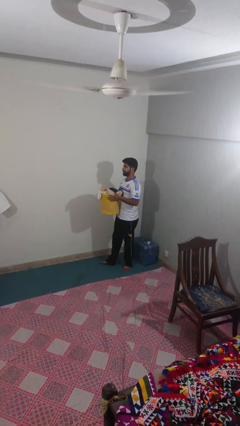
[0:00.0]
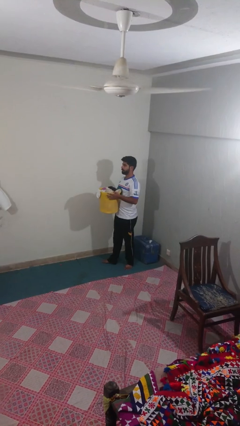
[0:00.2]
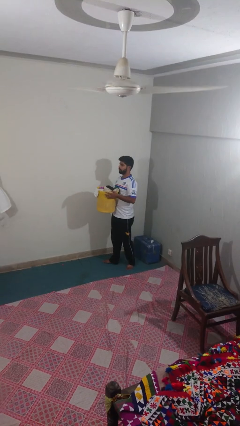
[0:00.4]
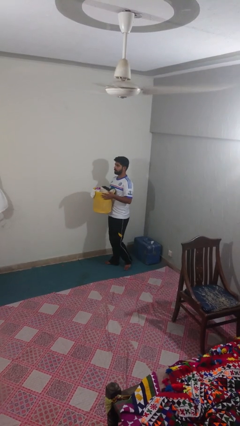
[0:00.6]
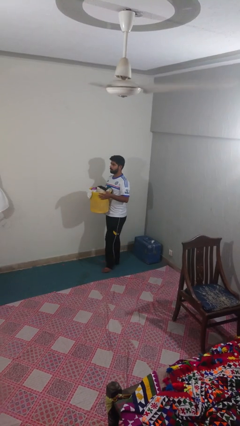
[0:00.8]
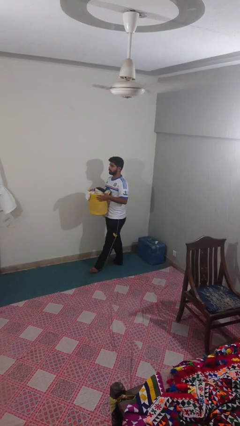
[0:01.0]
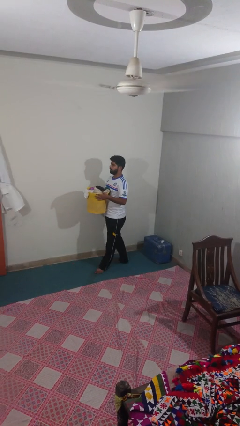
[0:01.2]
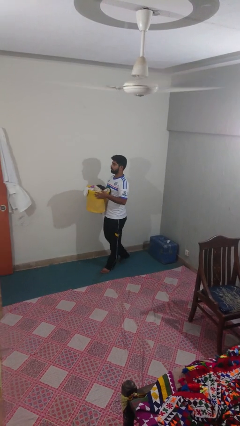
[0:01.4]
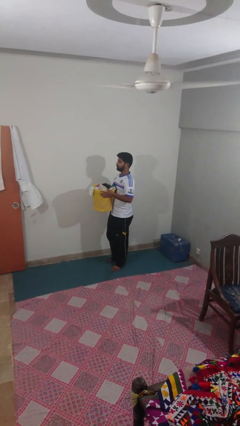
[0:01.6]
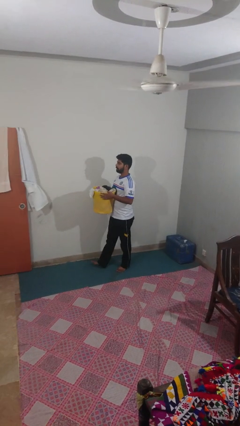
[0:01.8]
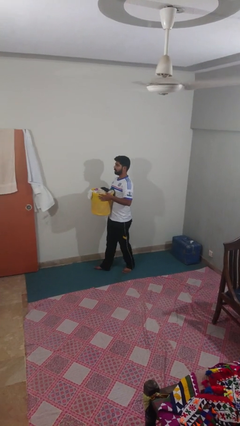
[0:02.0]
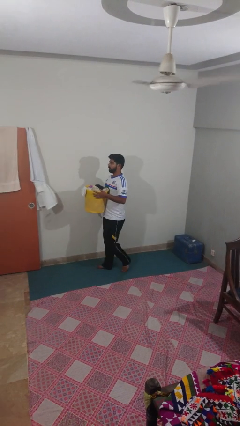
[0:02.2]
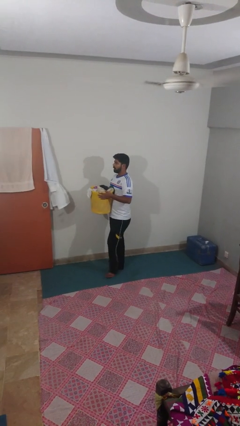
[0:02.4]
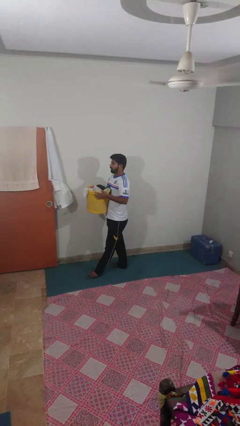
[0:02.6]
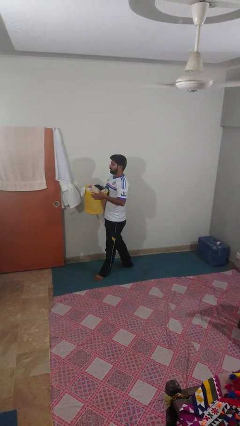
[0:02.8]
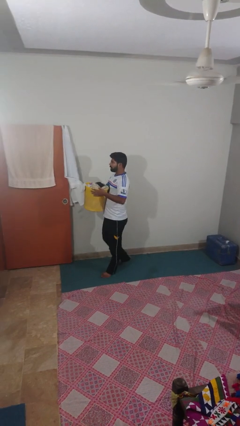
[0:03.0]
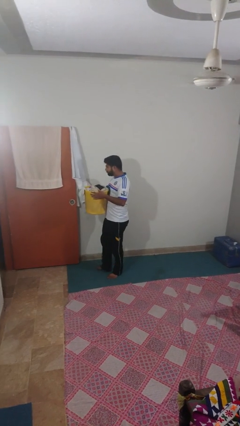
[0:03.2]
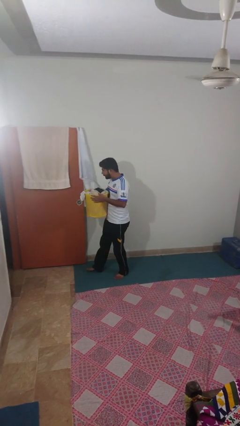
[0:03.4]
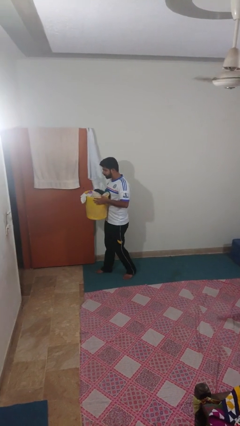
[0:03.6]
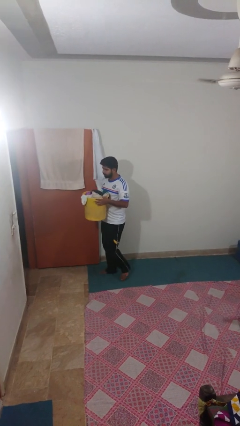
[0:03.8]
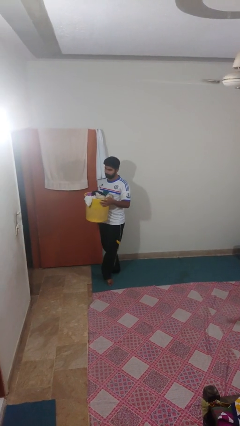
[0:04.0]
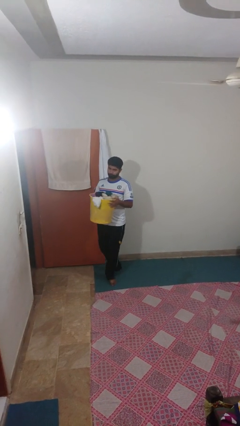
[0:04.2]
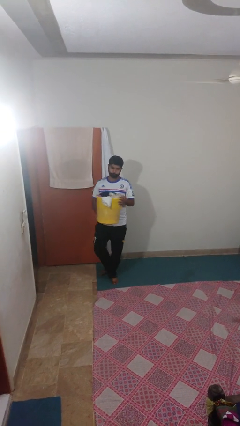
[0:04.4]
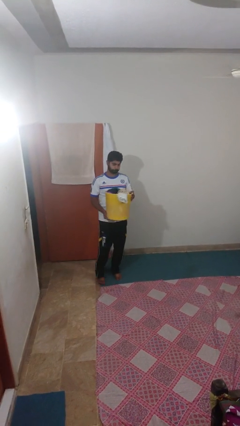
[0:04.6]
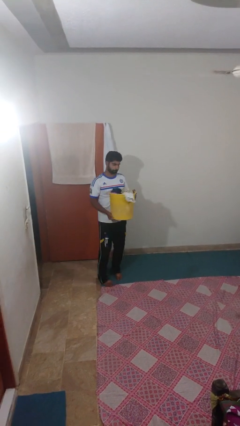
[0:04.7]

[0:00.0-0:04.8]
person carries laundry basket

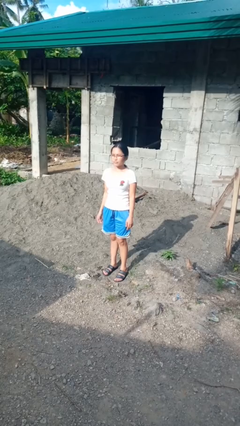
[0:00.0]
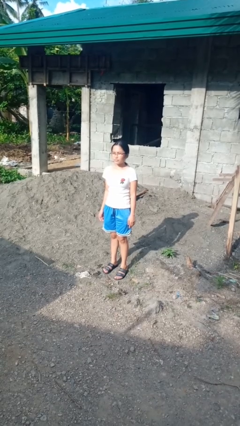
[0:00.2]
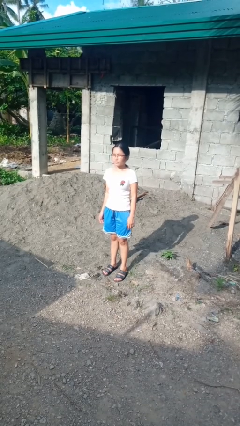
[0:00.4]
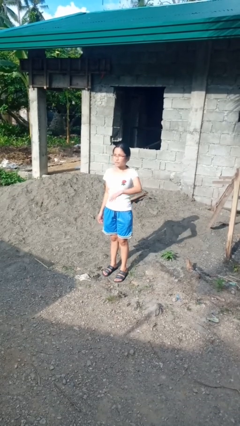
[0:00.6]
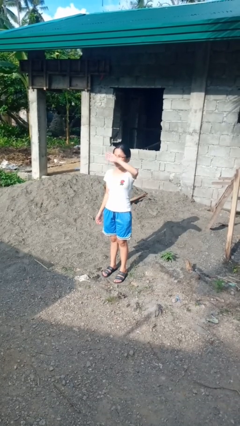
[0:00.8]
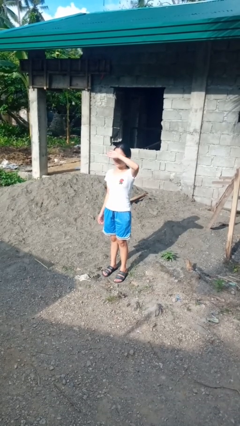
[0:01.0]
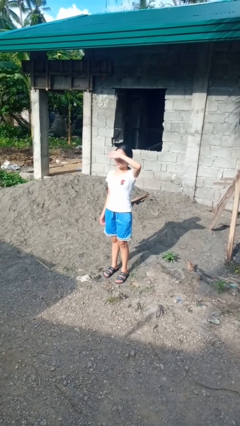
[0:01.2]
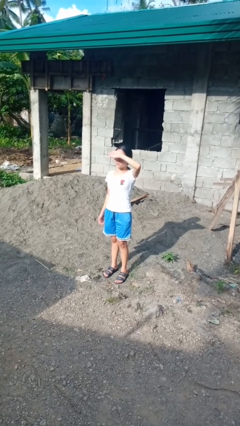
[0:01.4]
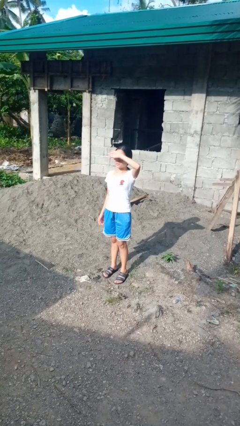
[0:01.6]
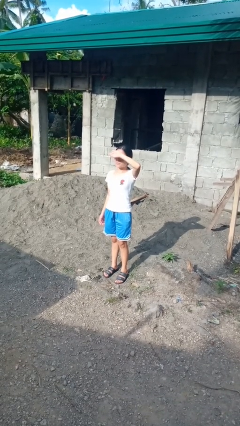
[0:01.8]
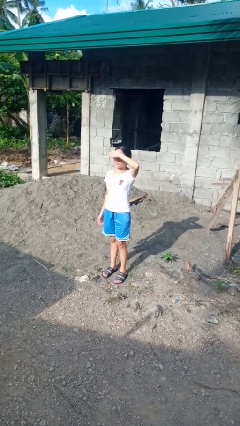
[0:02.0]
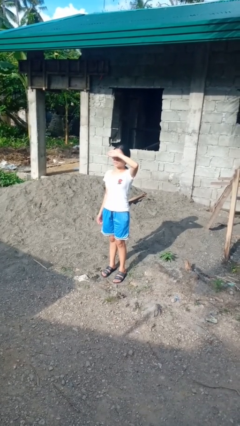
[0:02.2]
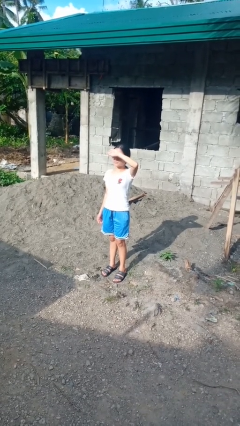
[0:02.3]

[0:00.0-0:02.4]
person shades eyes

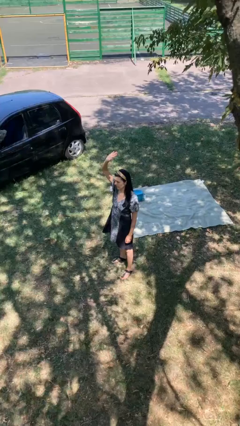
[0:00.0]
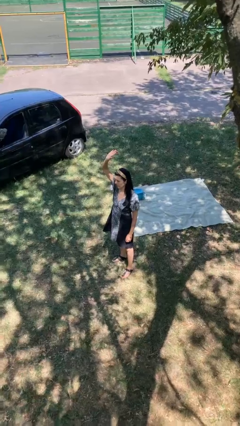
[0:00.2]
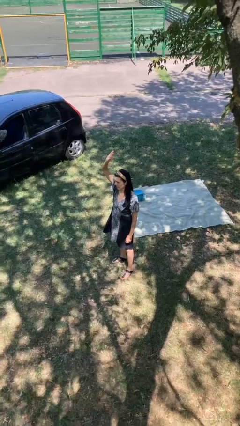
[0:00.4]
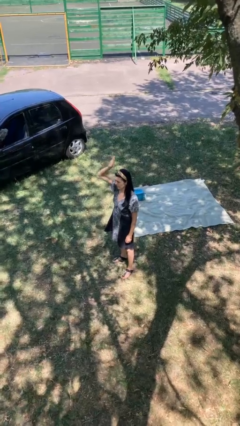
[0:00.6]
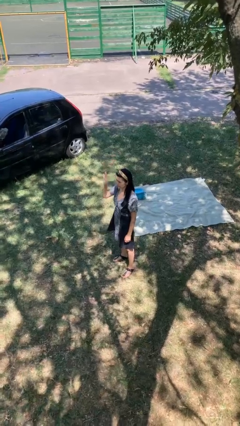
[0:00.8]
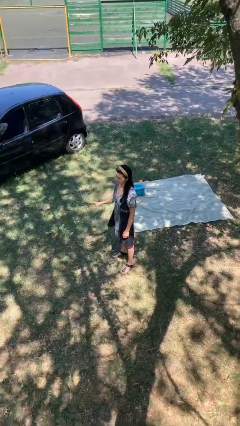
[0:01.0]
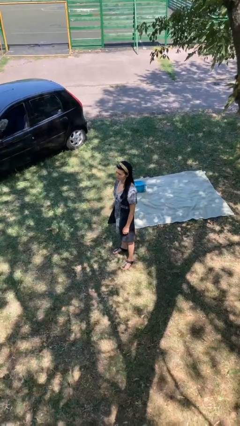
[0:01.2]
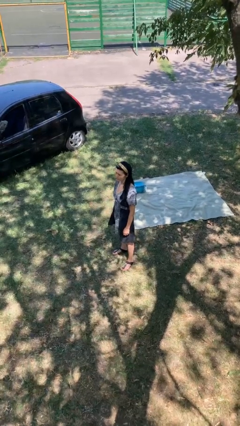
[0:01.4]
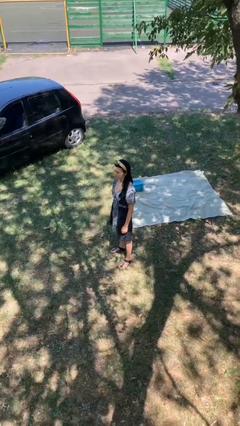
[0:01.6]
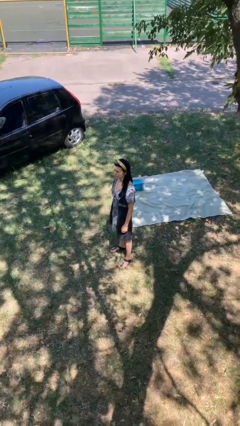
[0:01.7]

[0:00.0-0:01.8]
person gestures lower hand

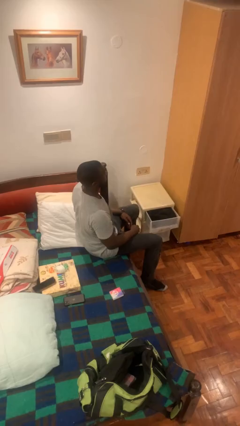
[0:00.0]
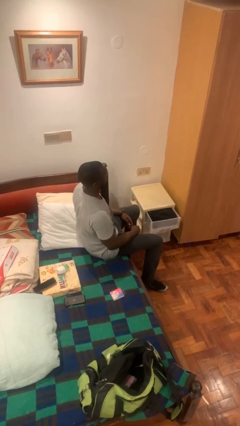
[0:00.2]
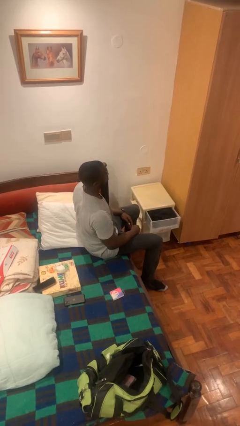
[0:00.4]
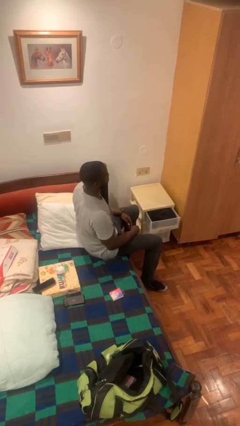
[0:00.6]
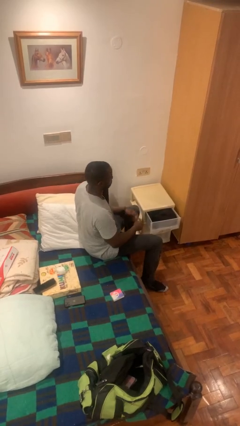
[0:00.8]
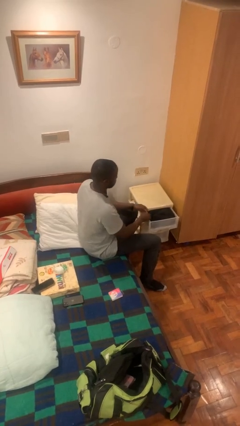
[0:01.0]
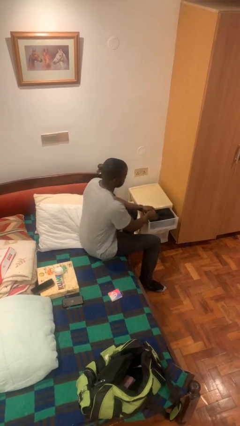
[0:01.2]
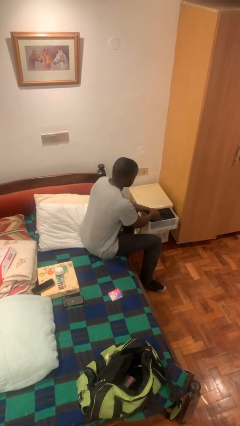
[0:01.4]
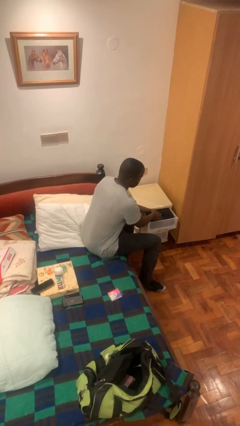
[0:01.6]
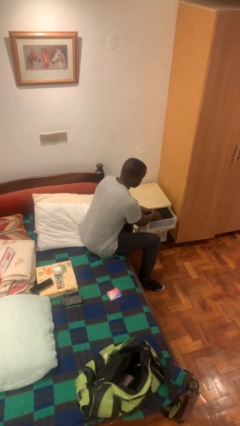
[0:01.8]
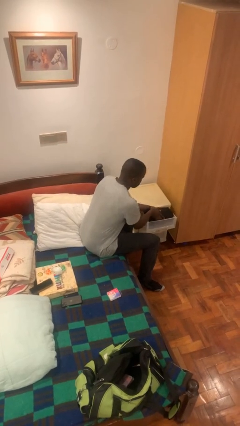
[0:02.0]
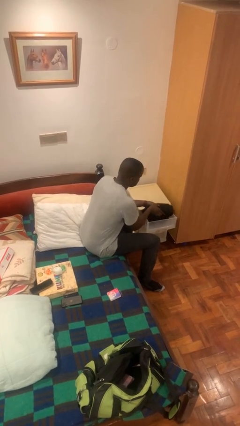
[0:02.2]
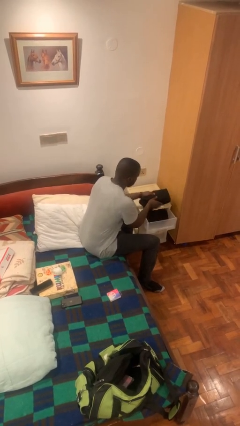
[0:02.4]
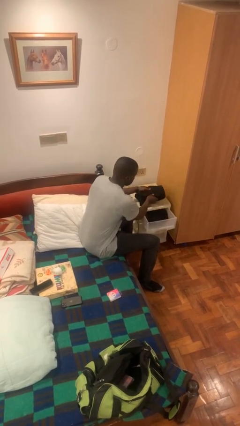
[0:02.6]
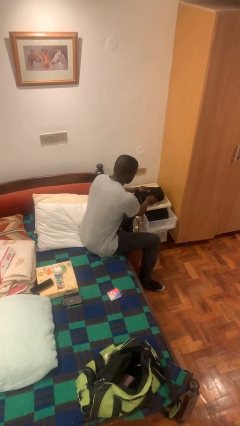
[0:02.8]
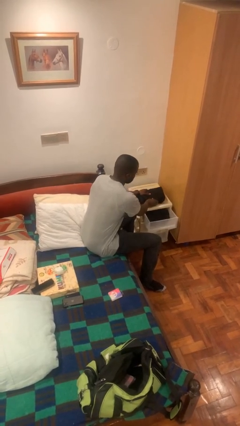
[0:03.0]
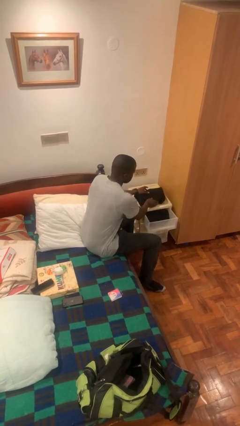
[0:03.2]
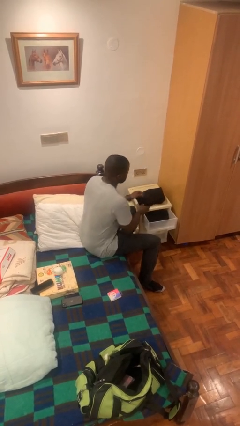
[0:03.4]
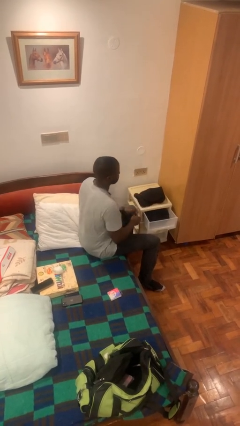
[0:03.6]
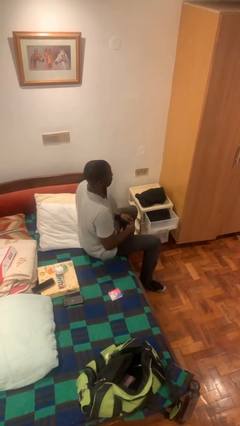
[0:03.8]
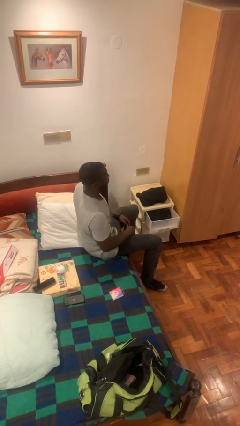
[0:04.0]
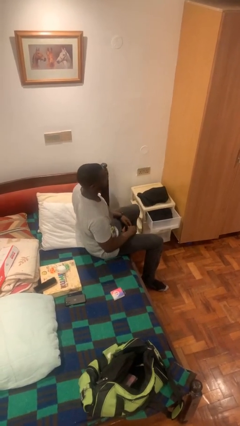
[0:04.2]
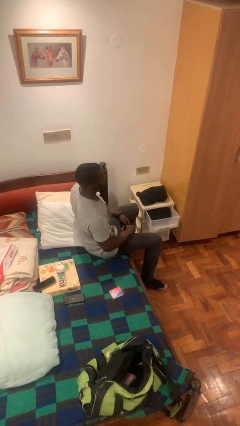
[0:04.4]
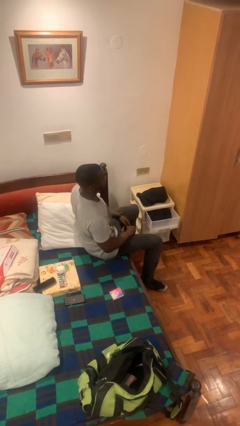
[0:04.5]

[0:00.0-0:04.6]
person takes clothes from dresser

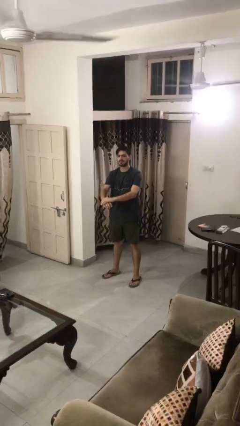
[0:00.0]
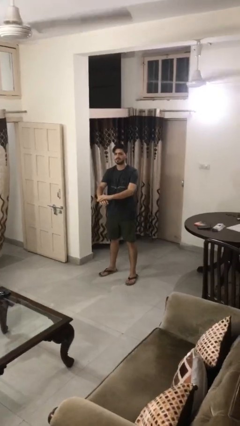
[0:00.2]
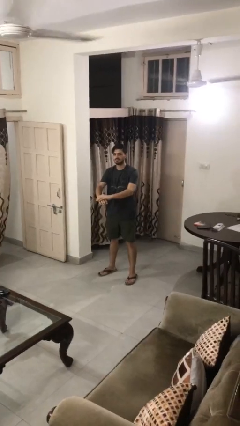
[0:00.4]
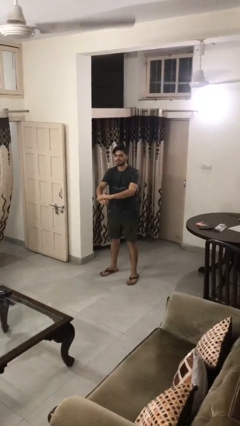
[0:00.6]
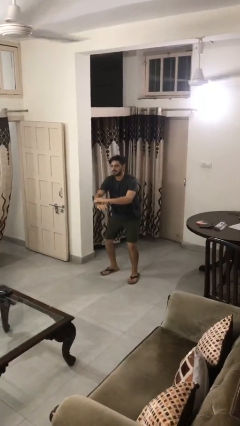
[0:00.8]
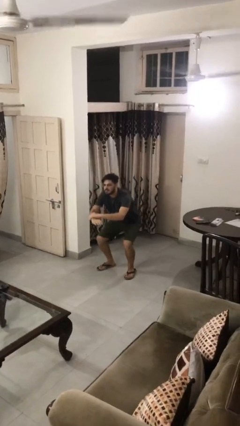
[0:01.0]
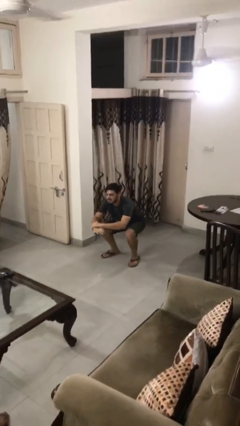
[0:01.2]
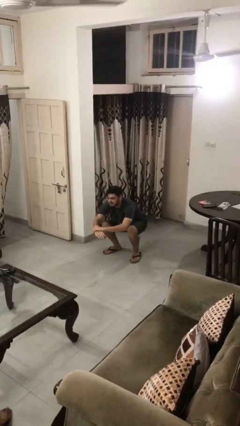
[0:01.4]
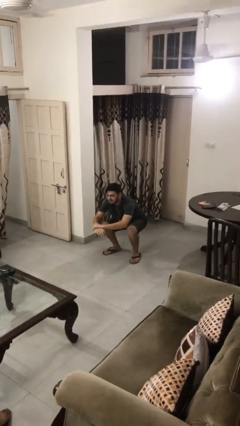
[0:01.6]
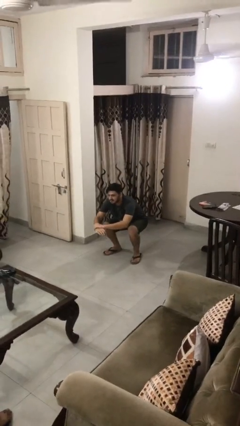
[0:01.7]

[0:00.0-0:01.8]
person squats

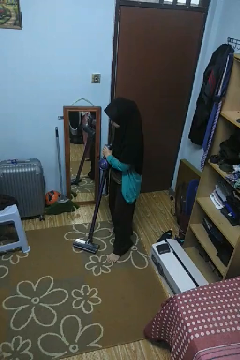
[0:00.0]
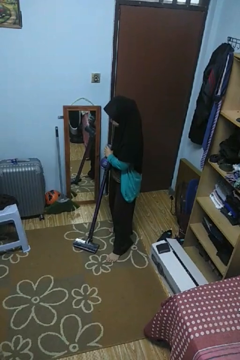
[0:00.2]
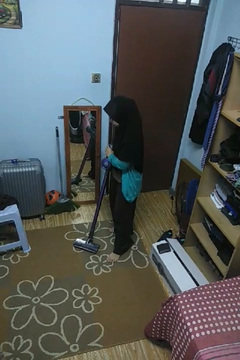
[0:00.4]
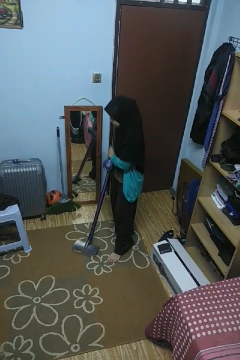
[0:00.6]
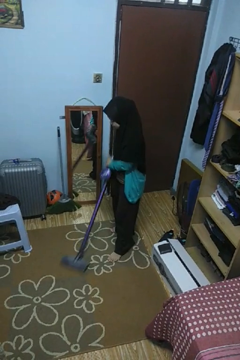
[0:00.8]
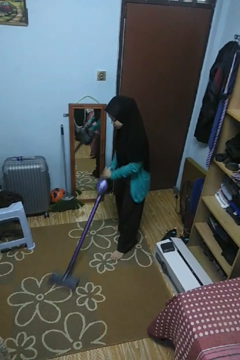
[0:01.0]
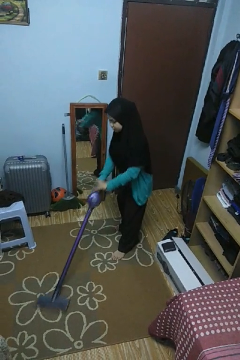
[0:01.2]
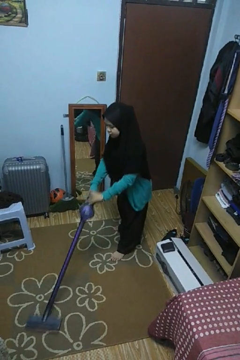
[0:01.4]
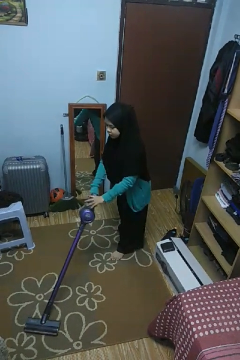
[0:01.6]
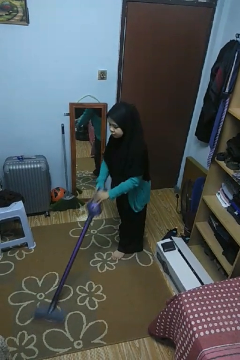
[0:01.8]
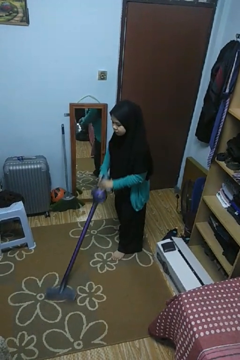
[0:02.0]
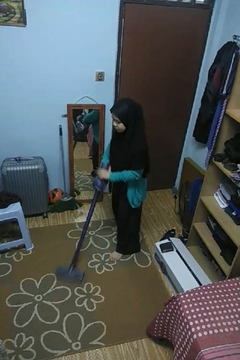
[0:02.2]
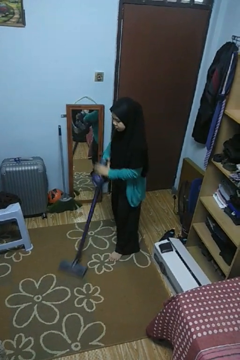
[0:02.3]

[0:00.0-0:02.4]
person vacuums carpet

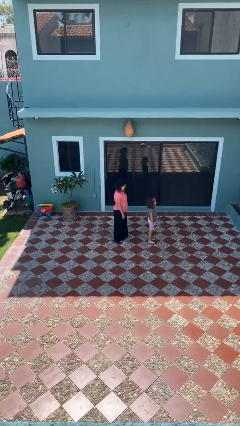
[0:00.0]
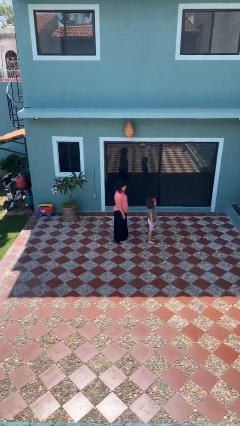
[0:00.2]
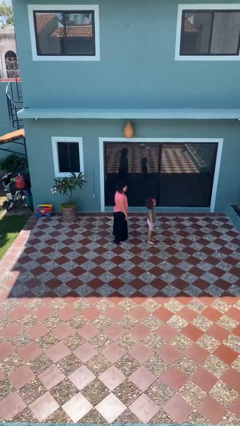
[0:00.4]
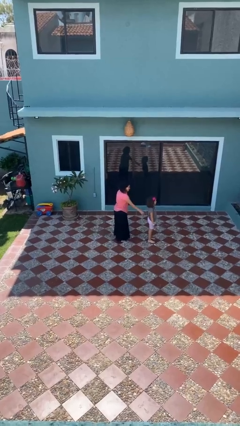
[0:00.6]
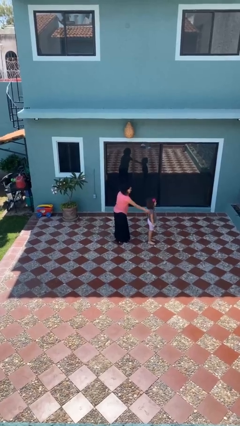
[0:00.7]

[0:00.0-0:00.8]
person grabs person by shoulder
